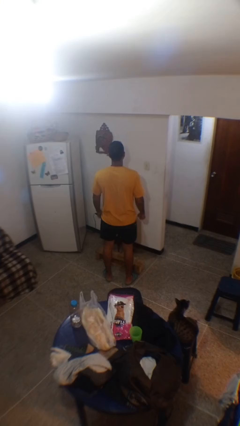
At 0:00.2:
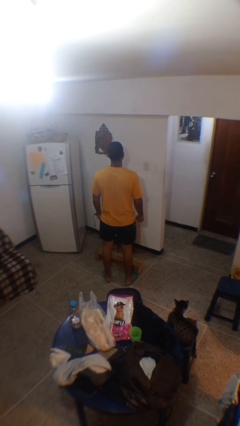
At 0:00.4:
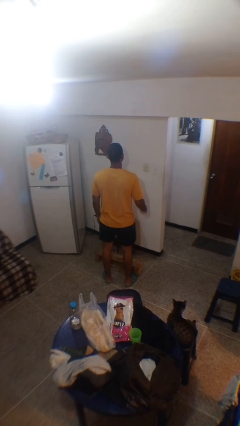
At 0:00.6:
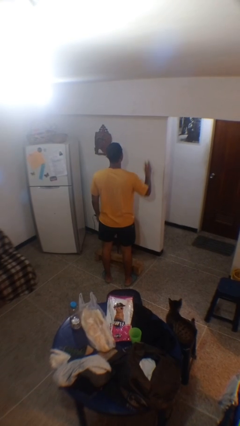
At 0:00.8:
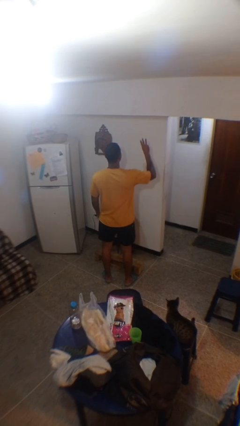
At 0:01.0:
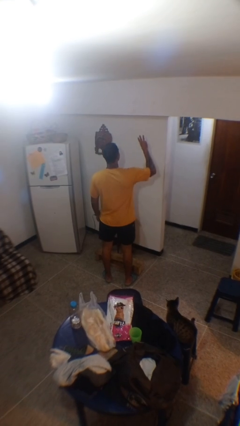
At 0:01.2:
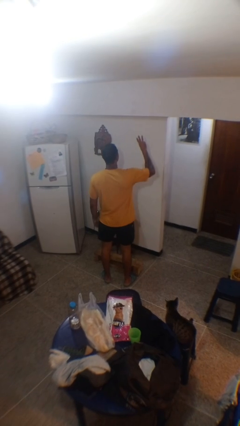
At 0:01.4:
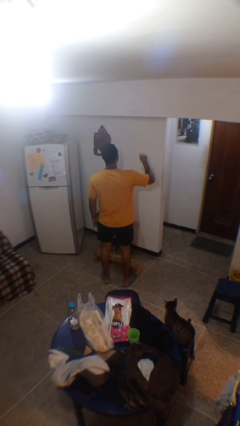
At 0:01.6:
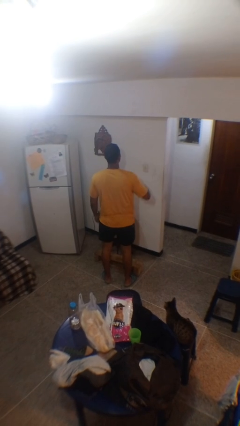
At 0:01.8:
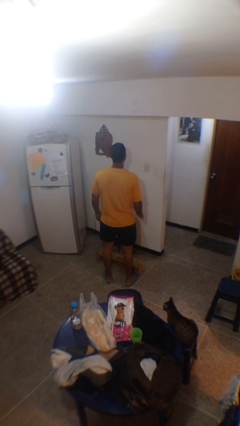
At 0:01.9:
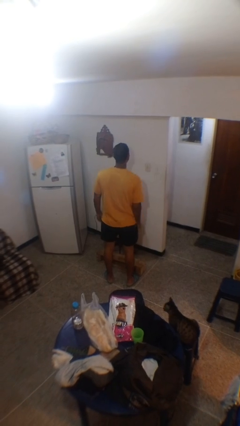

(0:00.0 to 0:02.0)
person gestures number three

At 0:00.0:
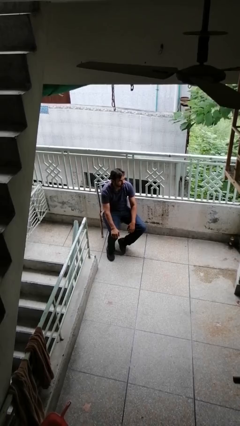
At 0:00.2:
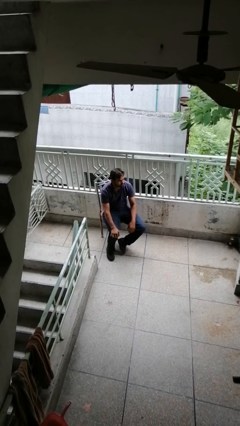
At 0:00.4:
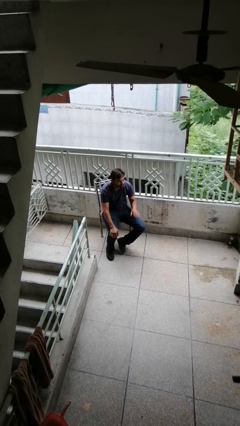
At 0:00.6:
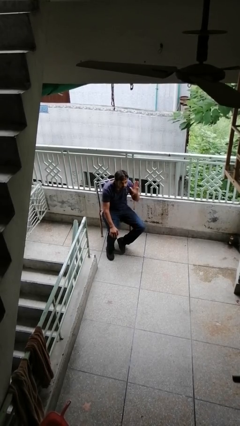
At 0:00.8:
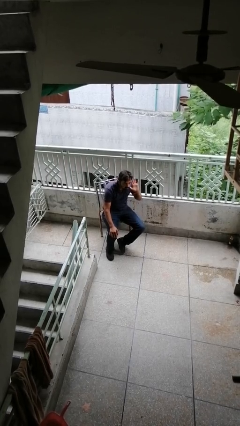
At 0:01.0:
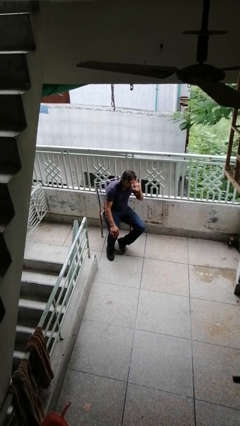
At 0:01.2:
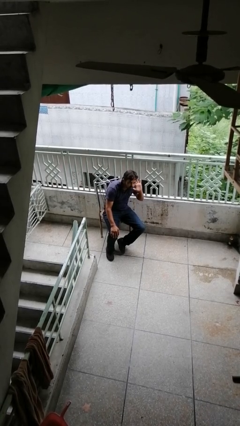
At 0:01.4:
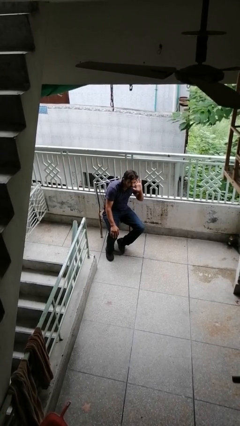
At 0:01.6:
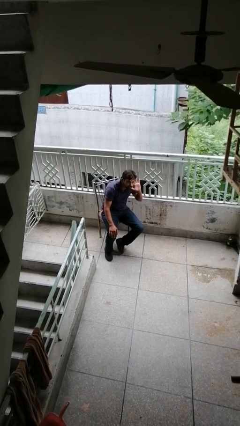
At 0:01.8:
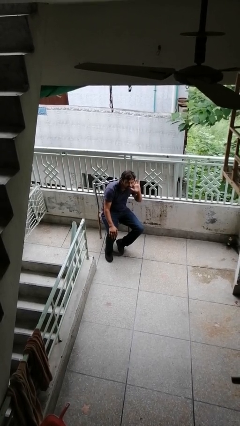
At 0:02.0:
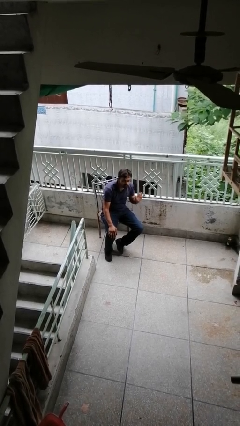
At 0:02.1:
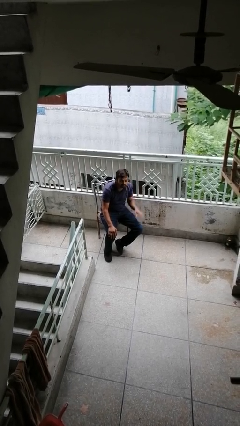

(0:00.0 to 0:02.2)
person gestures listen closely

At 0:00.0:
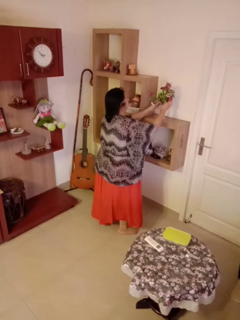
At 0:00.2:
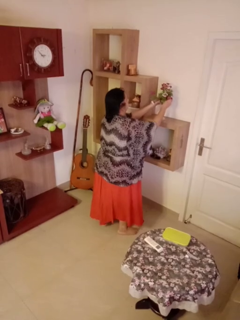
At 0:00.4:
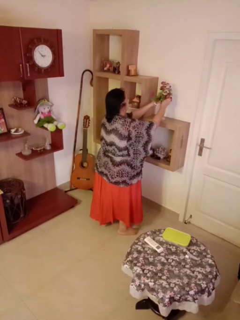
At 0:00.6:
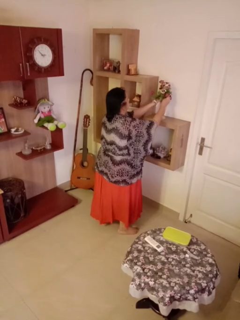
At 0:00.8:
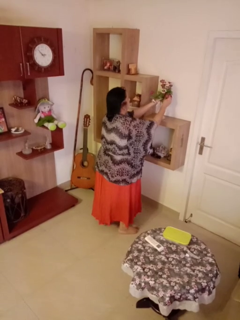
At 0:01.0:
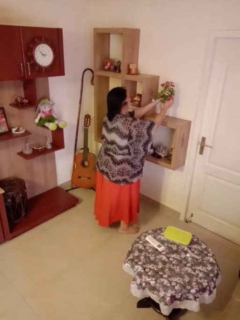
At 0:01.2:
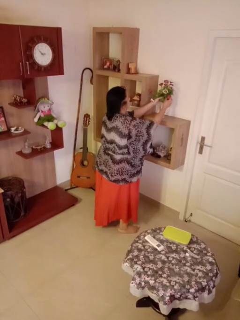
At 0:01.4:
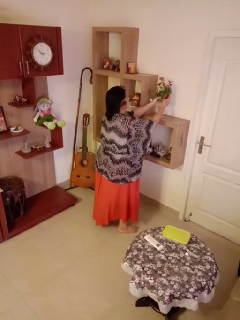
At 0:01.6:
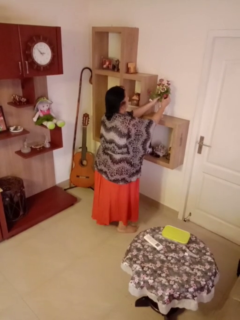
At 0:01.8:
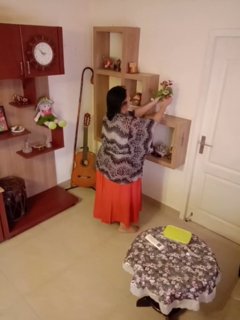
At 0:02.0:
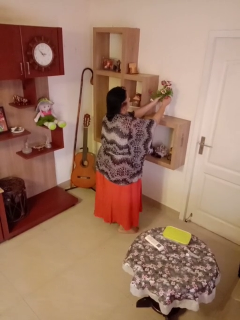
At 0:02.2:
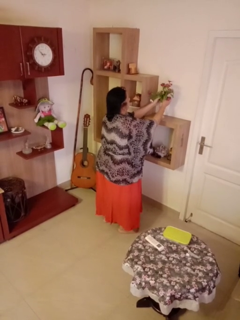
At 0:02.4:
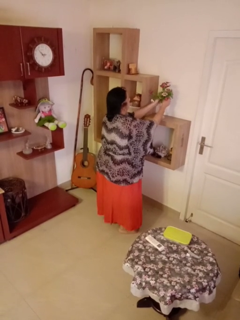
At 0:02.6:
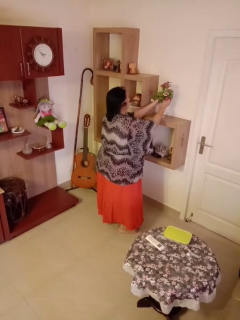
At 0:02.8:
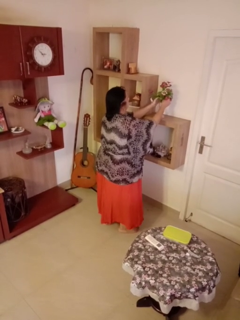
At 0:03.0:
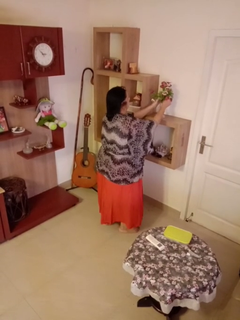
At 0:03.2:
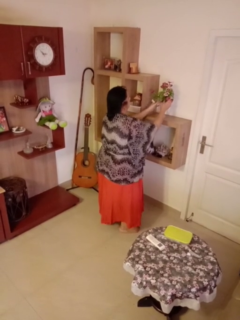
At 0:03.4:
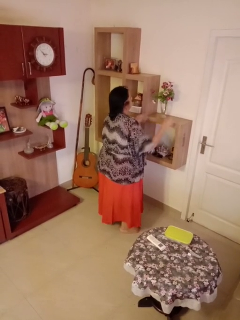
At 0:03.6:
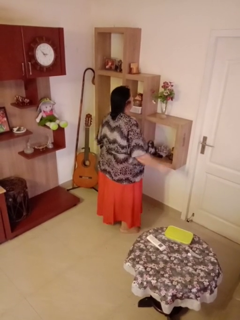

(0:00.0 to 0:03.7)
person arranges flowers in vase

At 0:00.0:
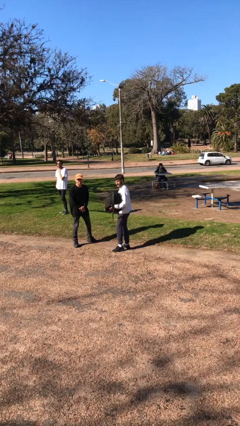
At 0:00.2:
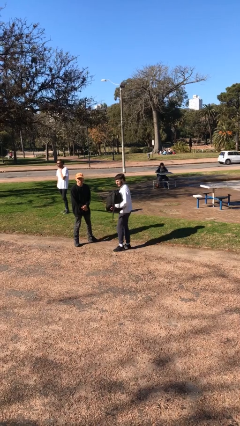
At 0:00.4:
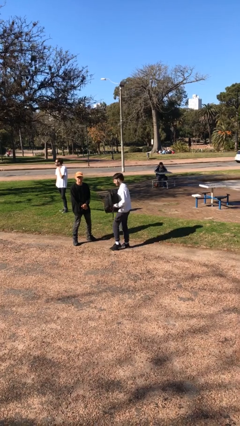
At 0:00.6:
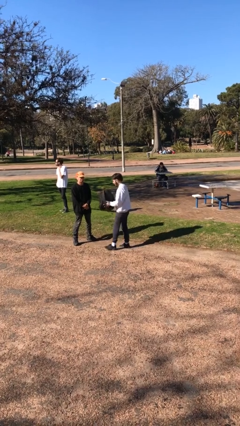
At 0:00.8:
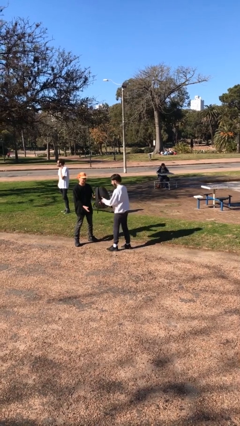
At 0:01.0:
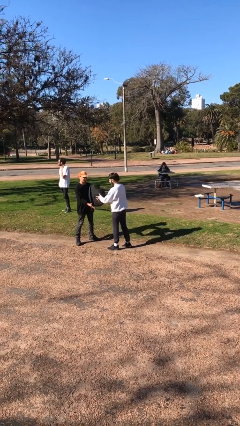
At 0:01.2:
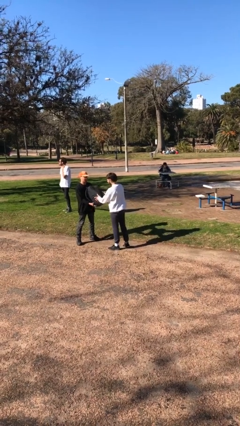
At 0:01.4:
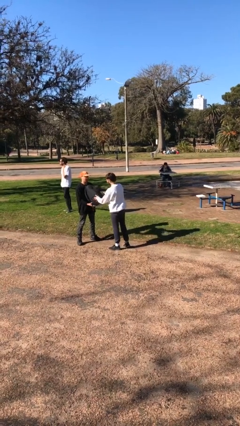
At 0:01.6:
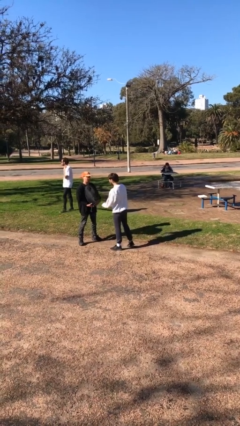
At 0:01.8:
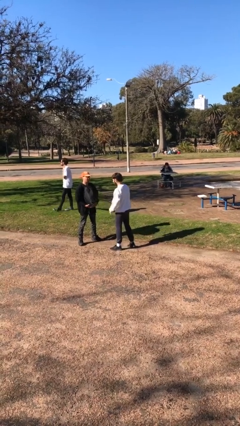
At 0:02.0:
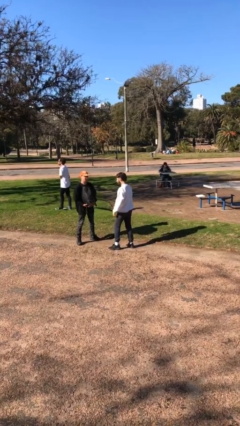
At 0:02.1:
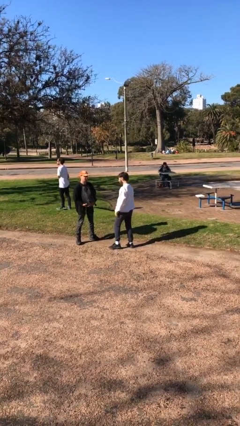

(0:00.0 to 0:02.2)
person transfers object to person

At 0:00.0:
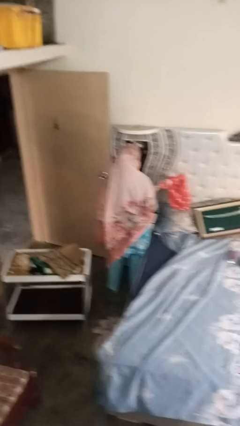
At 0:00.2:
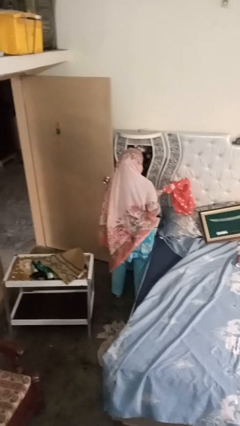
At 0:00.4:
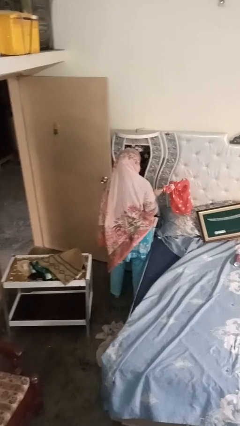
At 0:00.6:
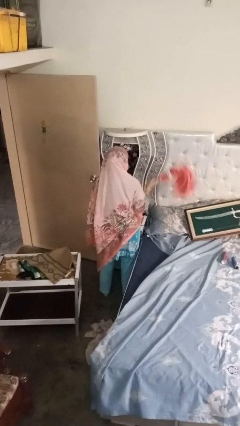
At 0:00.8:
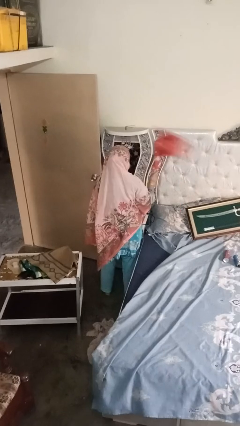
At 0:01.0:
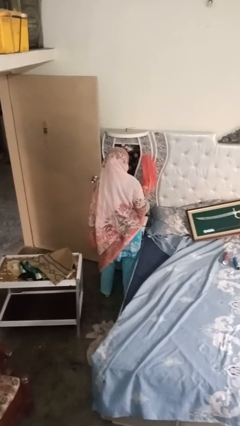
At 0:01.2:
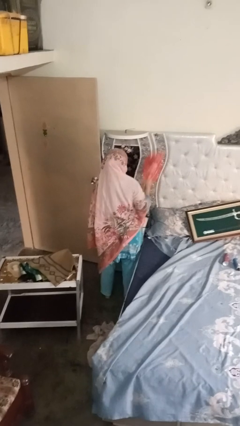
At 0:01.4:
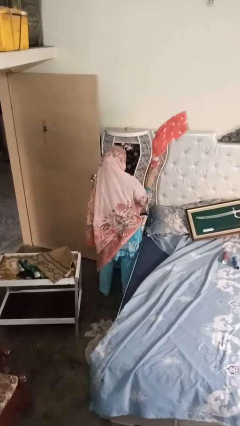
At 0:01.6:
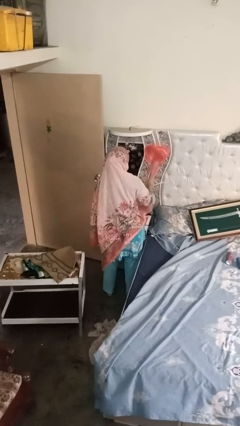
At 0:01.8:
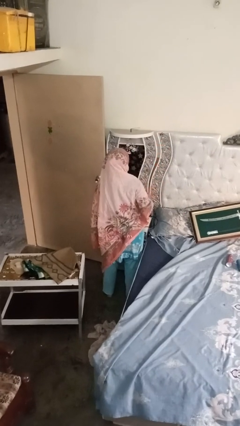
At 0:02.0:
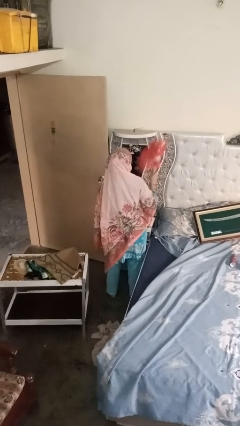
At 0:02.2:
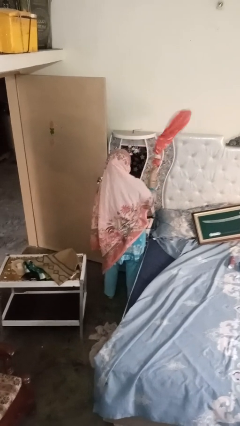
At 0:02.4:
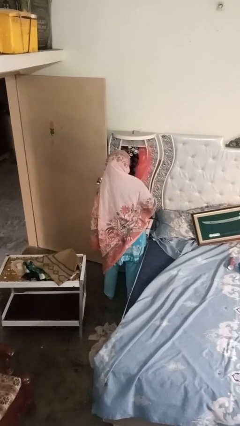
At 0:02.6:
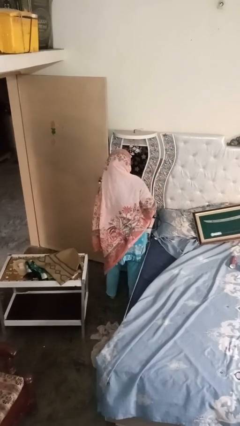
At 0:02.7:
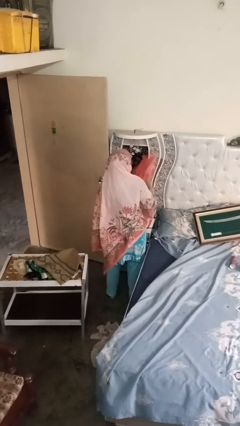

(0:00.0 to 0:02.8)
person dusts furniture

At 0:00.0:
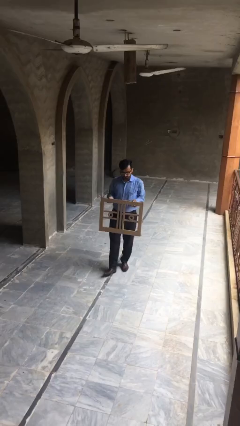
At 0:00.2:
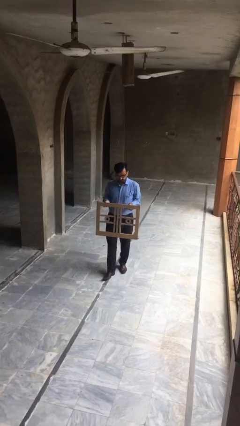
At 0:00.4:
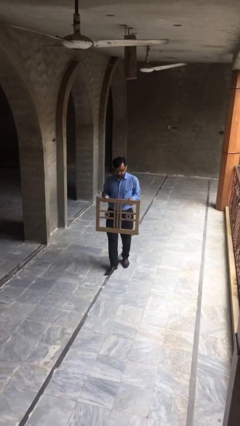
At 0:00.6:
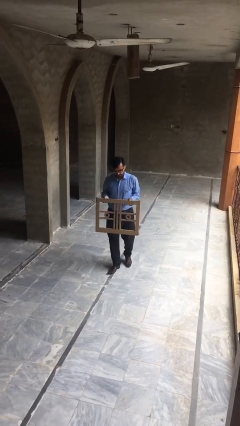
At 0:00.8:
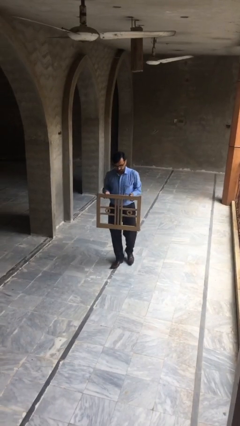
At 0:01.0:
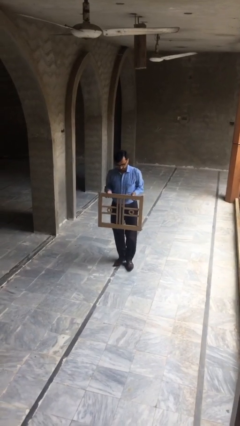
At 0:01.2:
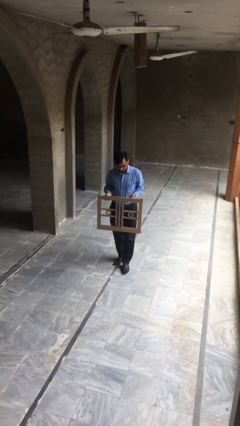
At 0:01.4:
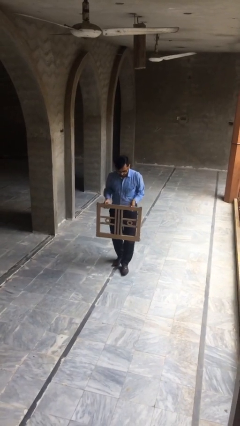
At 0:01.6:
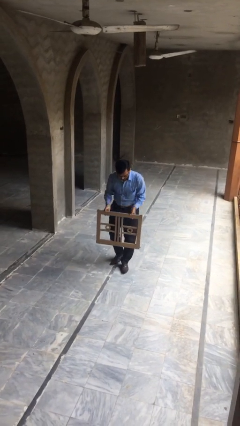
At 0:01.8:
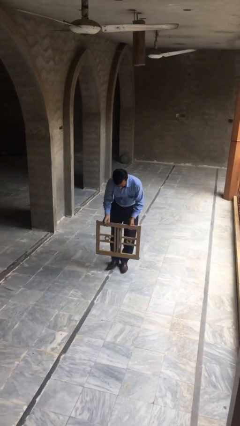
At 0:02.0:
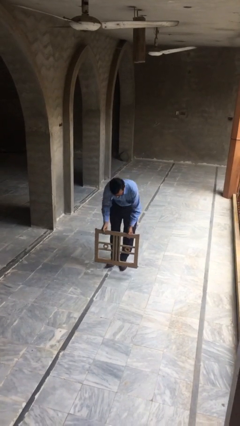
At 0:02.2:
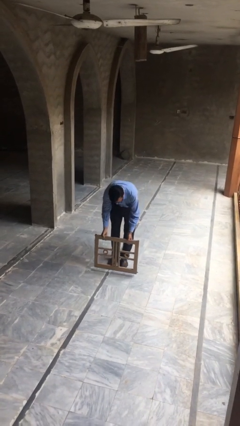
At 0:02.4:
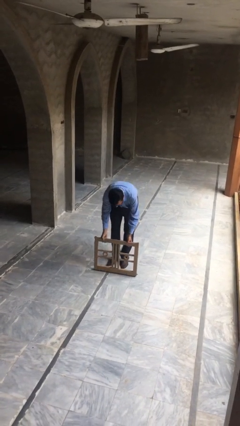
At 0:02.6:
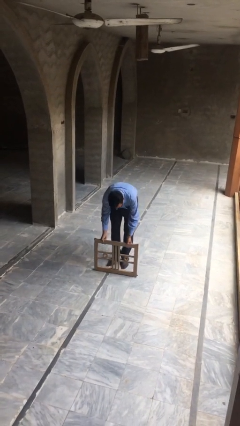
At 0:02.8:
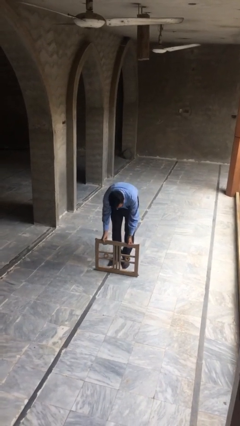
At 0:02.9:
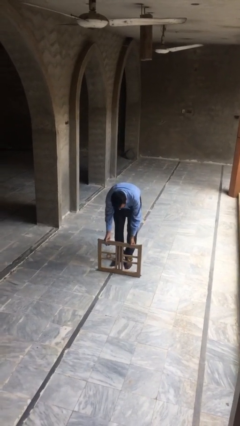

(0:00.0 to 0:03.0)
person puts down object on floor

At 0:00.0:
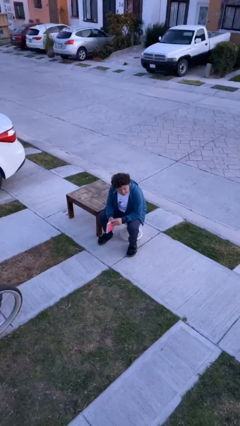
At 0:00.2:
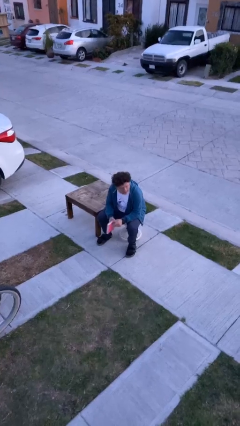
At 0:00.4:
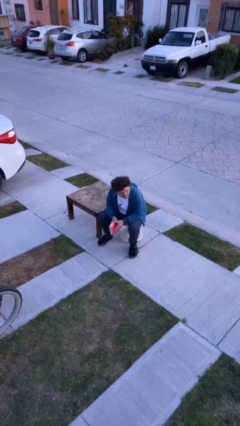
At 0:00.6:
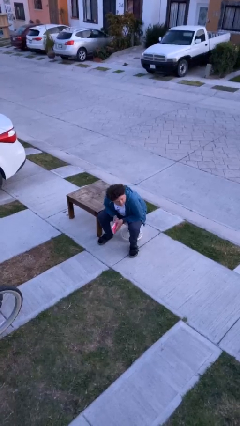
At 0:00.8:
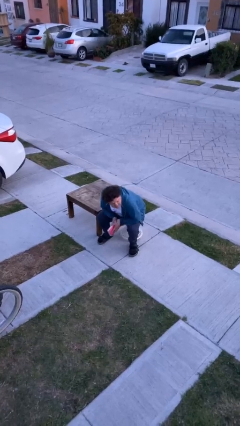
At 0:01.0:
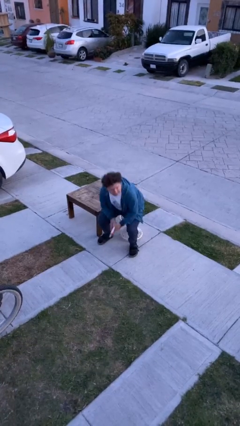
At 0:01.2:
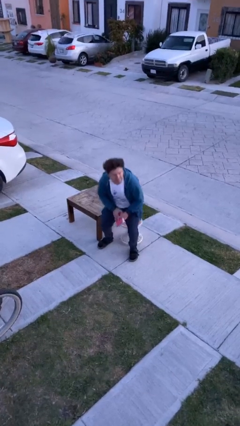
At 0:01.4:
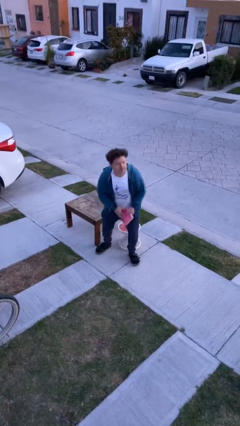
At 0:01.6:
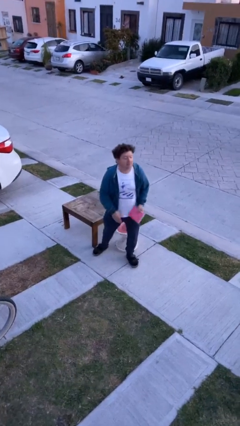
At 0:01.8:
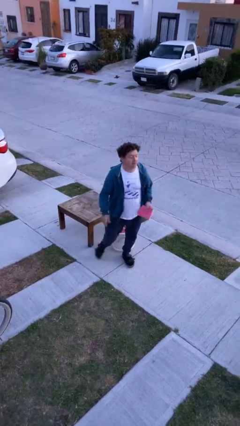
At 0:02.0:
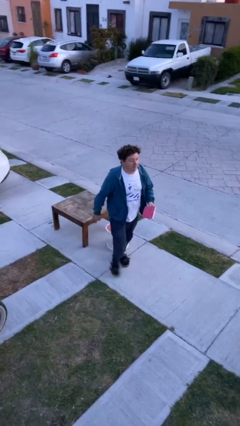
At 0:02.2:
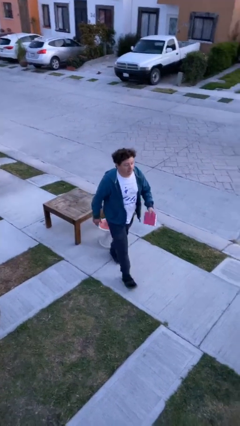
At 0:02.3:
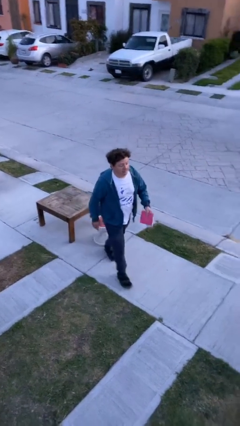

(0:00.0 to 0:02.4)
person stands up

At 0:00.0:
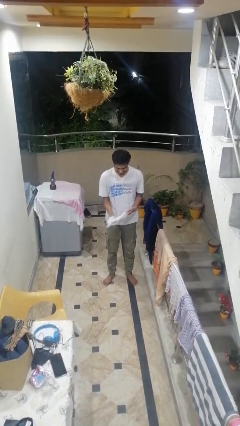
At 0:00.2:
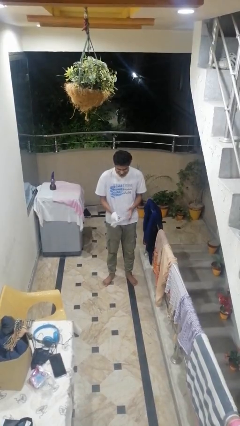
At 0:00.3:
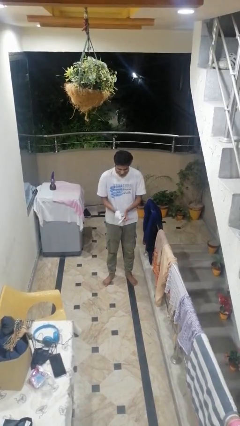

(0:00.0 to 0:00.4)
person takes off gloves
